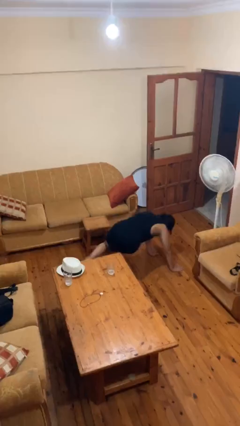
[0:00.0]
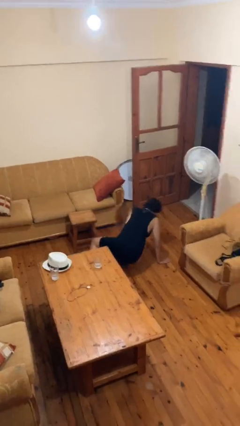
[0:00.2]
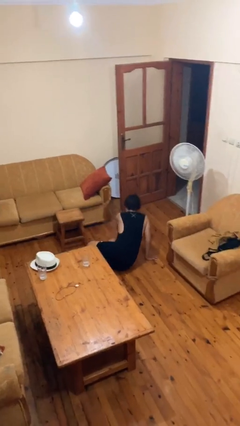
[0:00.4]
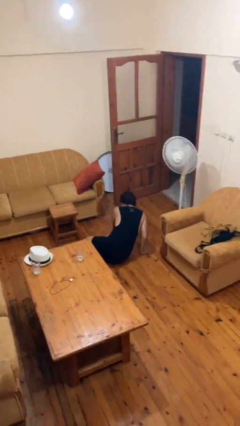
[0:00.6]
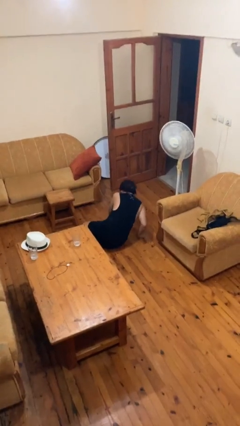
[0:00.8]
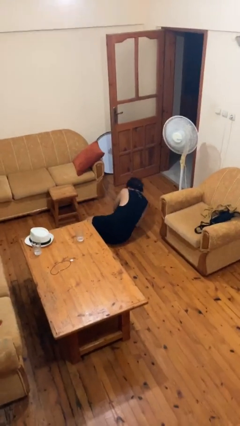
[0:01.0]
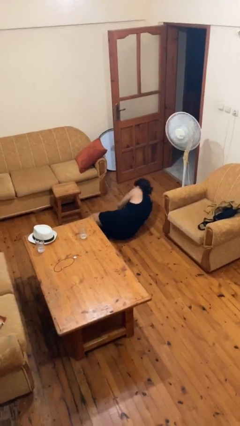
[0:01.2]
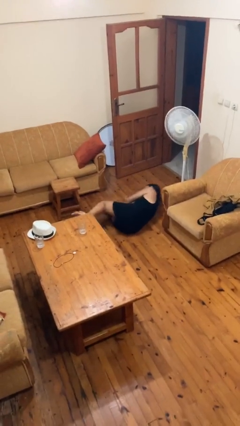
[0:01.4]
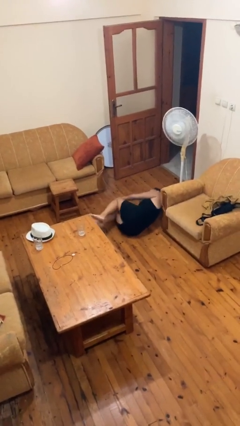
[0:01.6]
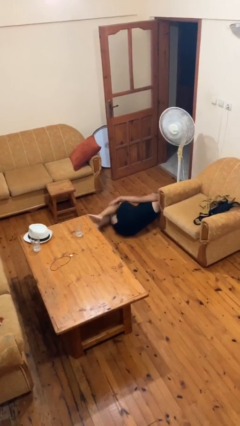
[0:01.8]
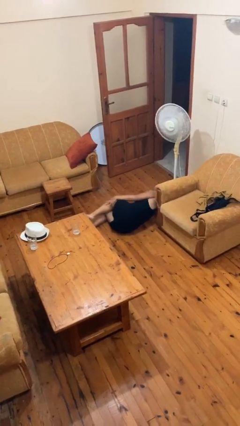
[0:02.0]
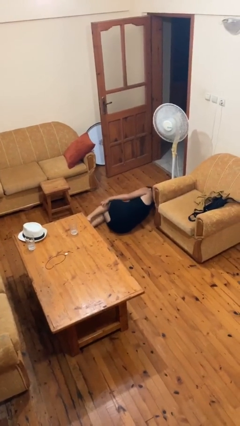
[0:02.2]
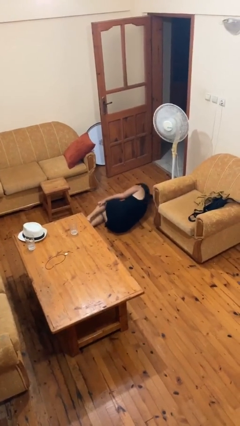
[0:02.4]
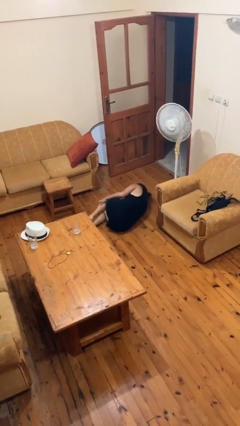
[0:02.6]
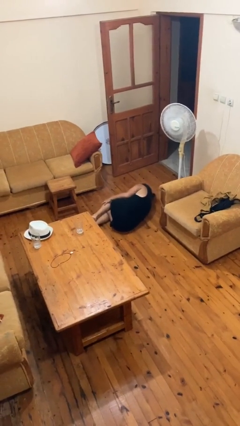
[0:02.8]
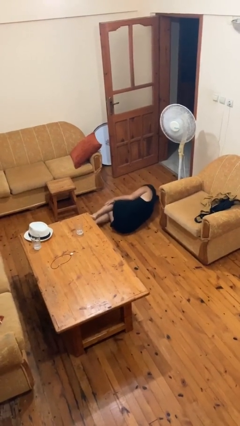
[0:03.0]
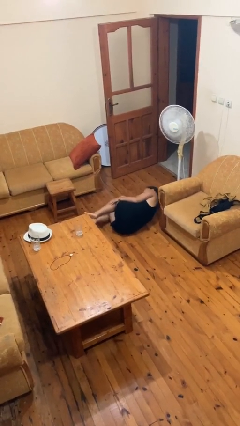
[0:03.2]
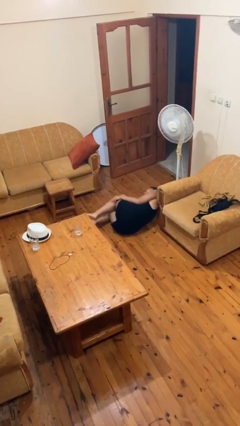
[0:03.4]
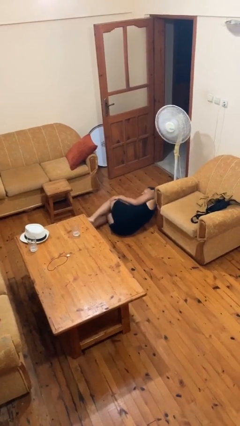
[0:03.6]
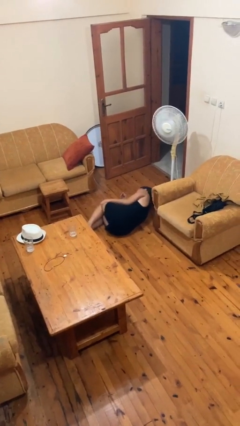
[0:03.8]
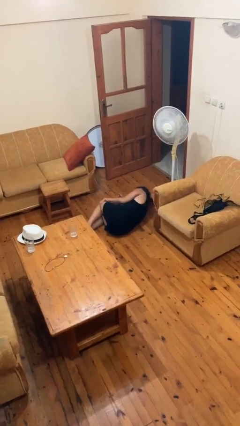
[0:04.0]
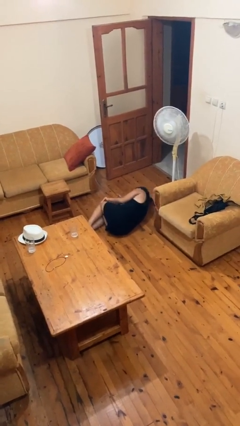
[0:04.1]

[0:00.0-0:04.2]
person lies down on floor

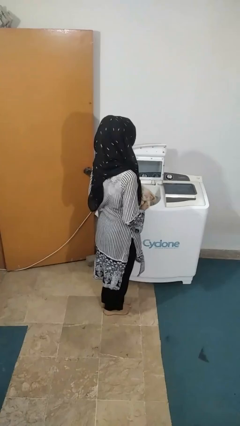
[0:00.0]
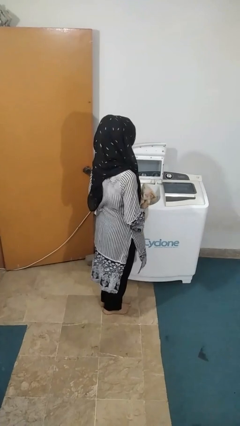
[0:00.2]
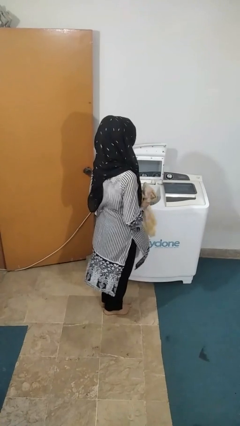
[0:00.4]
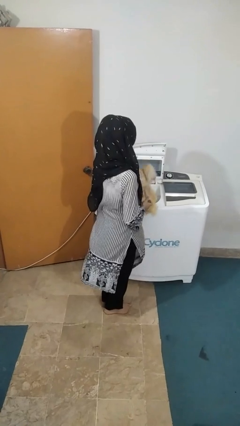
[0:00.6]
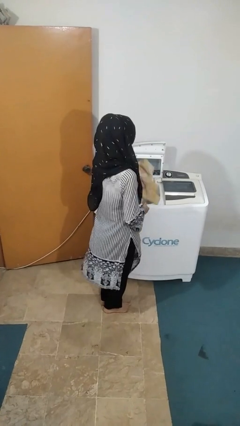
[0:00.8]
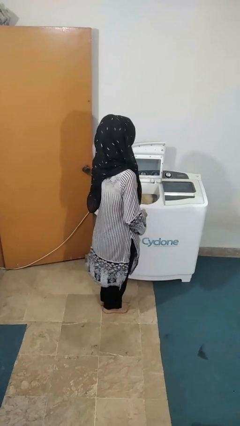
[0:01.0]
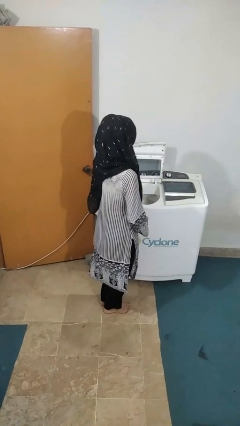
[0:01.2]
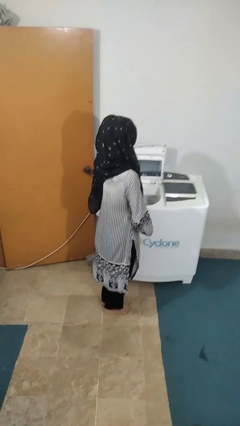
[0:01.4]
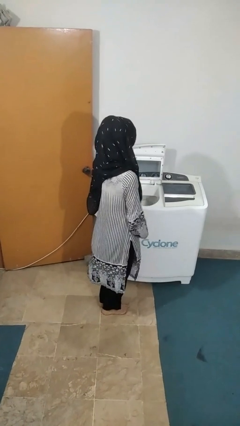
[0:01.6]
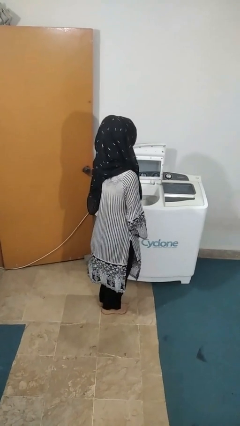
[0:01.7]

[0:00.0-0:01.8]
person loads clotheswasher

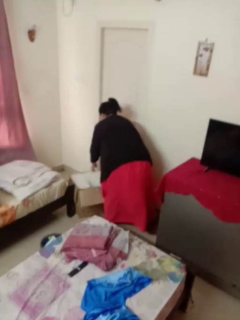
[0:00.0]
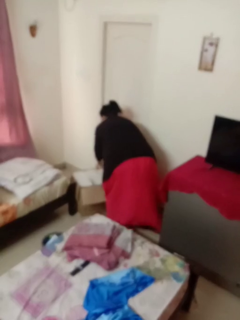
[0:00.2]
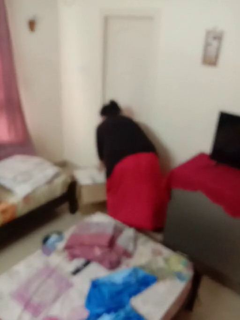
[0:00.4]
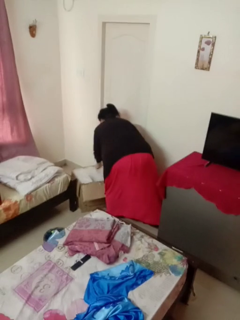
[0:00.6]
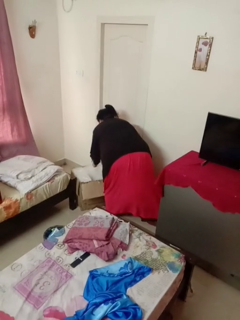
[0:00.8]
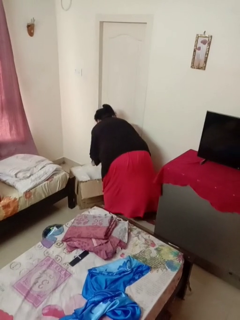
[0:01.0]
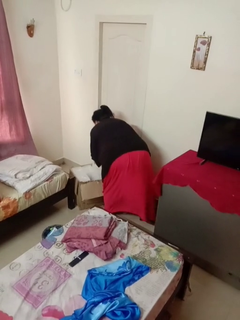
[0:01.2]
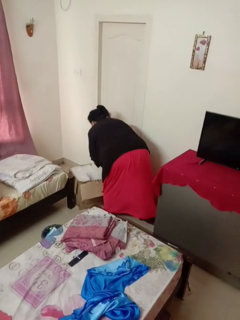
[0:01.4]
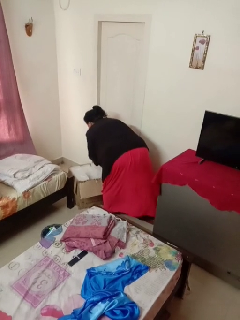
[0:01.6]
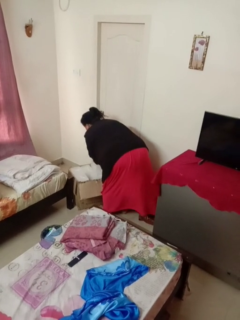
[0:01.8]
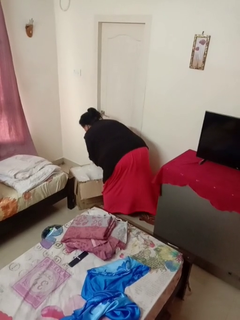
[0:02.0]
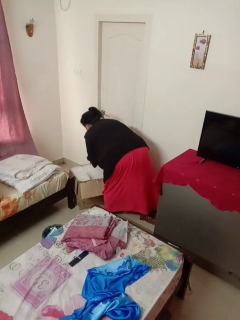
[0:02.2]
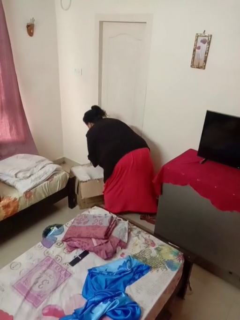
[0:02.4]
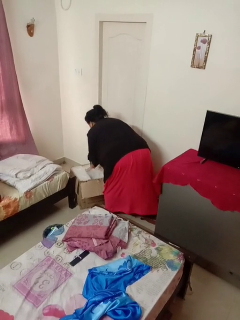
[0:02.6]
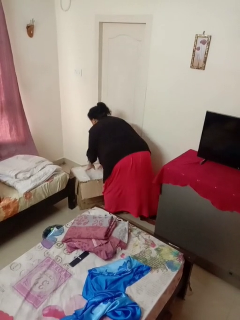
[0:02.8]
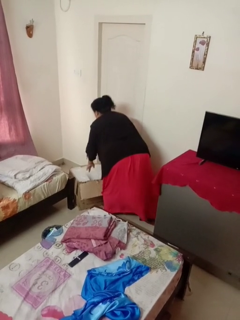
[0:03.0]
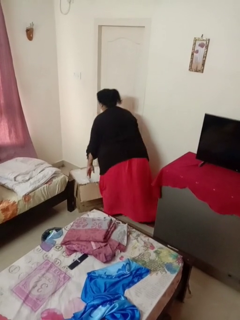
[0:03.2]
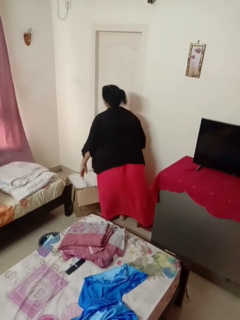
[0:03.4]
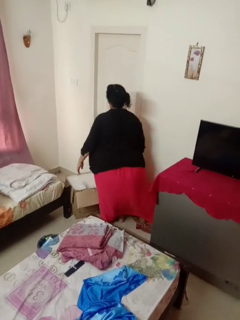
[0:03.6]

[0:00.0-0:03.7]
person searches in box

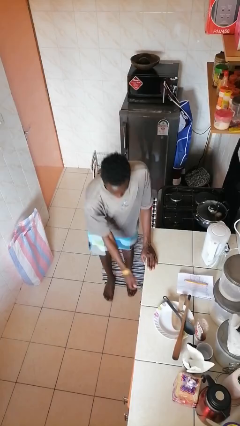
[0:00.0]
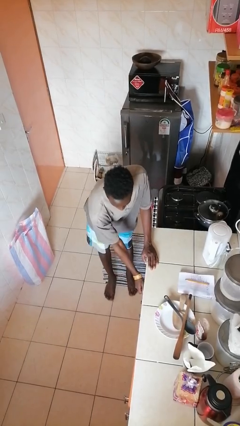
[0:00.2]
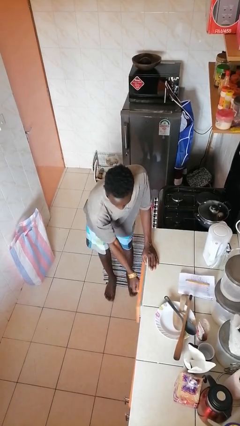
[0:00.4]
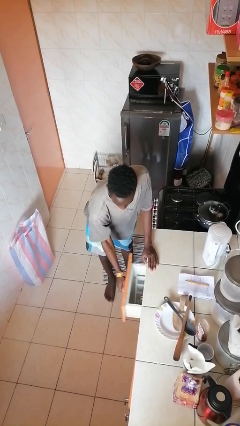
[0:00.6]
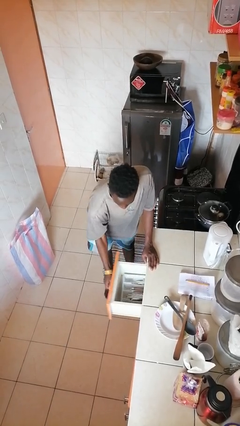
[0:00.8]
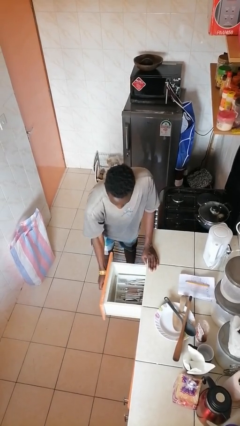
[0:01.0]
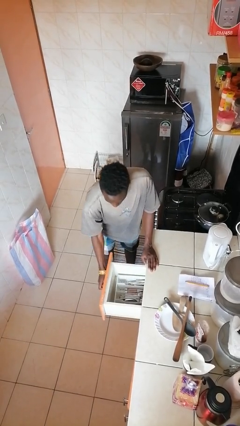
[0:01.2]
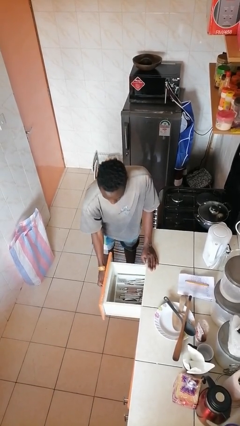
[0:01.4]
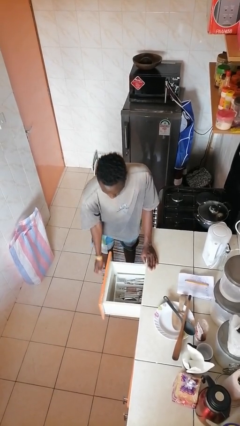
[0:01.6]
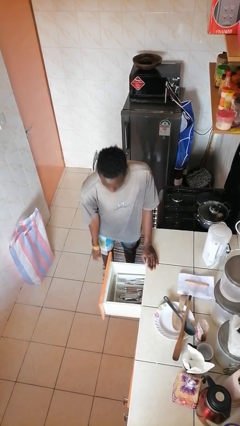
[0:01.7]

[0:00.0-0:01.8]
person opens kitchen drawer

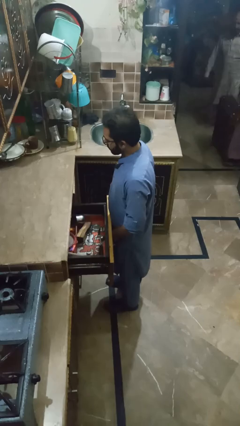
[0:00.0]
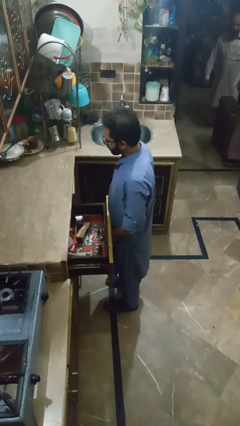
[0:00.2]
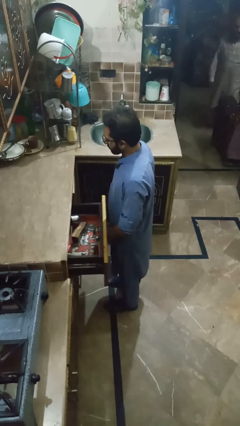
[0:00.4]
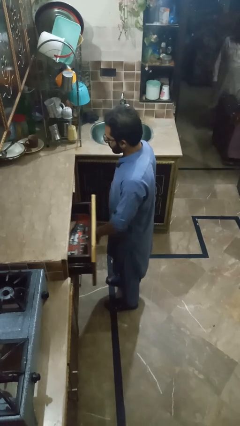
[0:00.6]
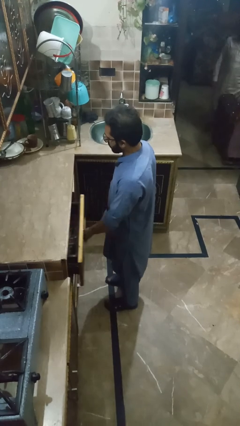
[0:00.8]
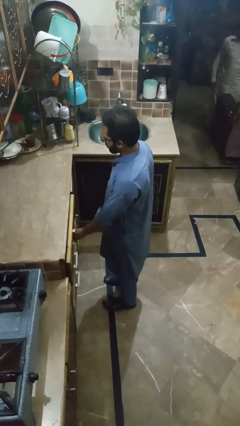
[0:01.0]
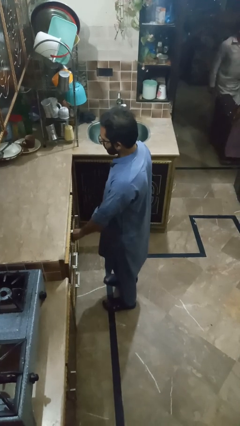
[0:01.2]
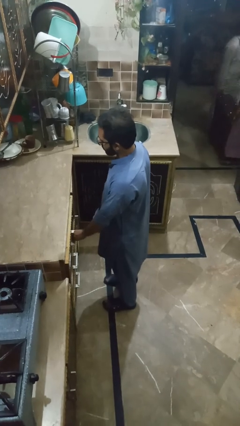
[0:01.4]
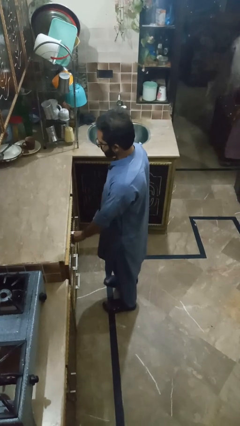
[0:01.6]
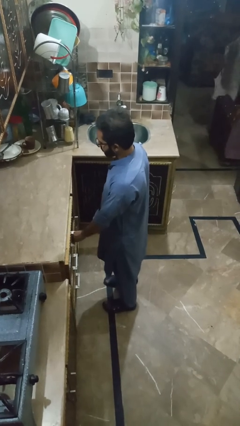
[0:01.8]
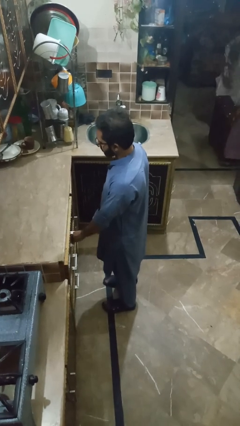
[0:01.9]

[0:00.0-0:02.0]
person closes kitchen drawer

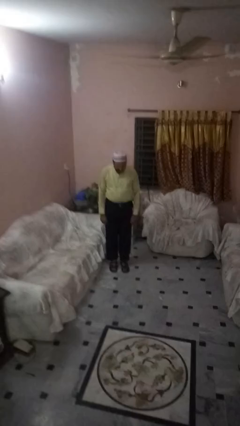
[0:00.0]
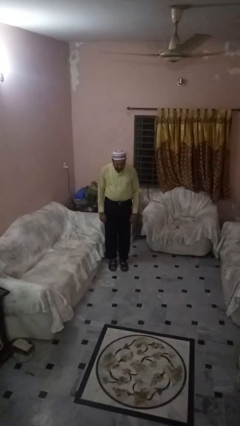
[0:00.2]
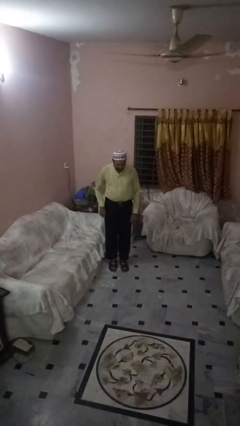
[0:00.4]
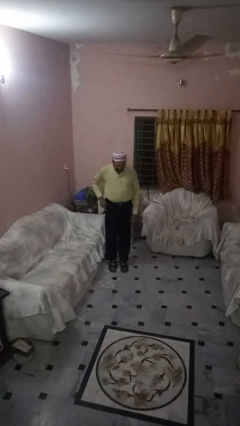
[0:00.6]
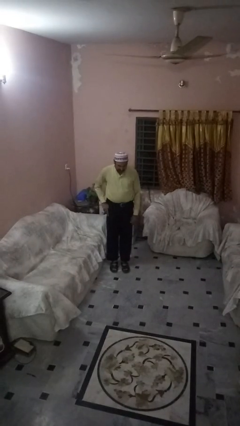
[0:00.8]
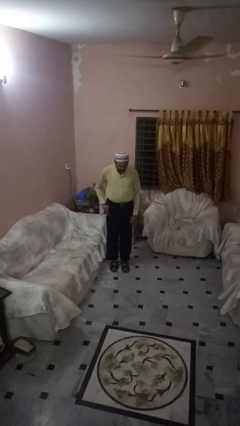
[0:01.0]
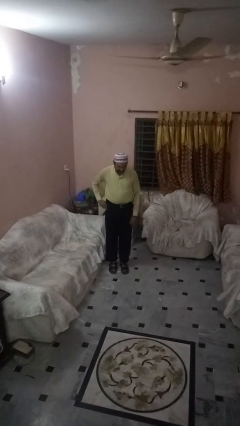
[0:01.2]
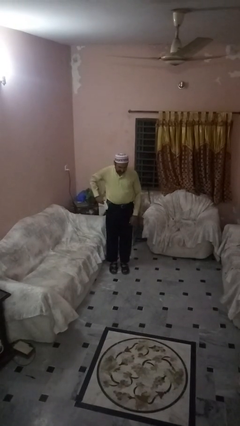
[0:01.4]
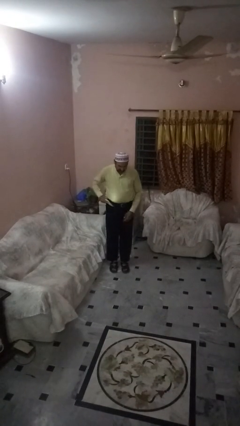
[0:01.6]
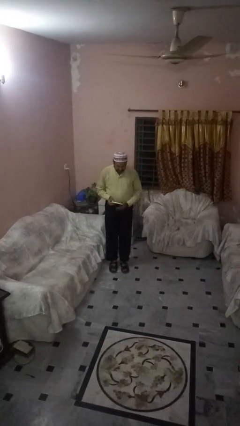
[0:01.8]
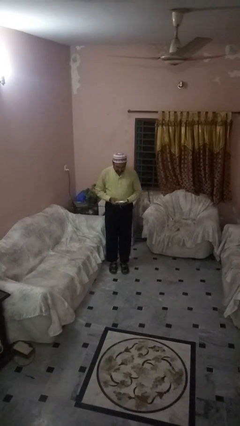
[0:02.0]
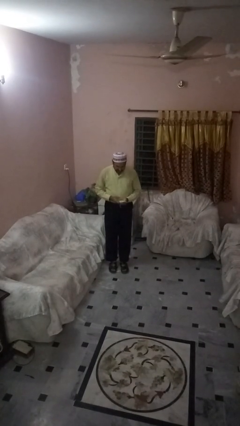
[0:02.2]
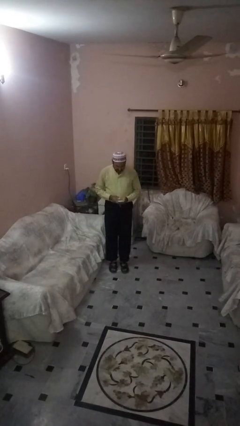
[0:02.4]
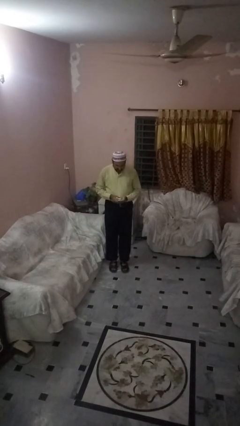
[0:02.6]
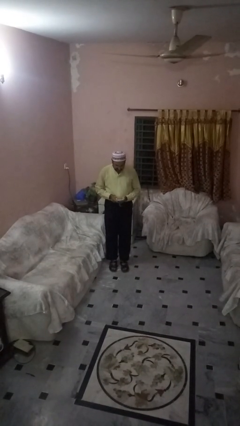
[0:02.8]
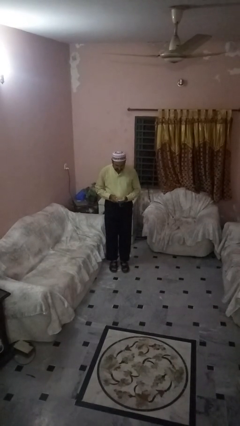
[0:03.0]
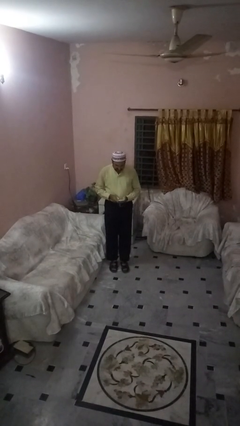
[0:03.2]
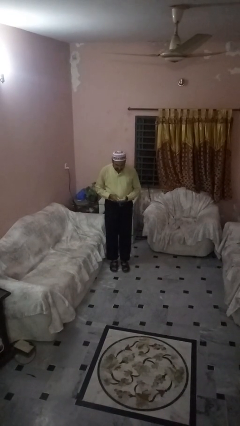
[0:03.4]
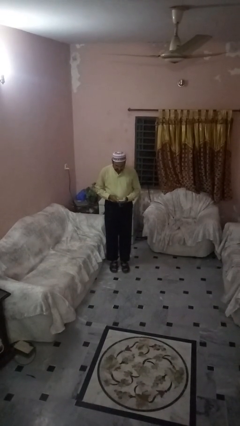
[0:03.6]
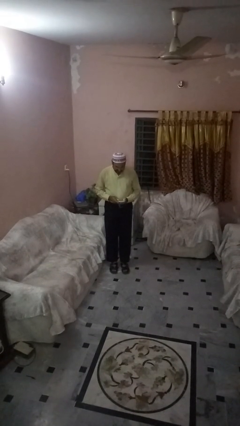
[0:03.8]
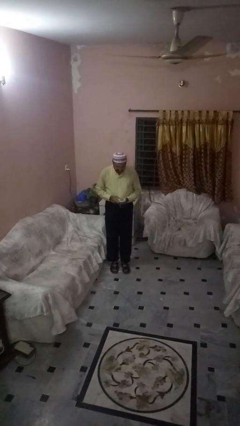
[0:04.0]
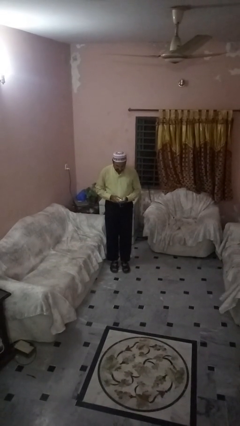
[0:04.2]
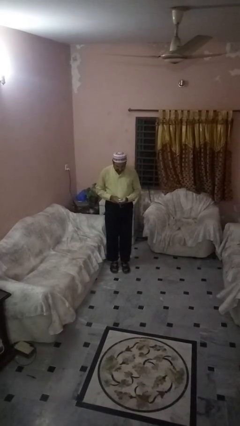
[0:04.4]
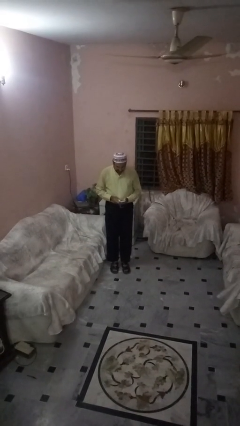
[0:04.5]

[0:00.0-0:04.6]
person takes phone from pocket
